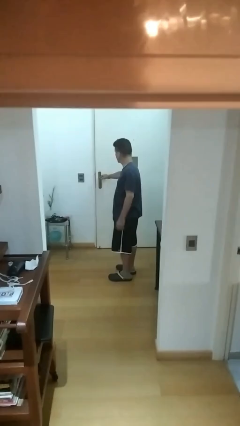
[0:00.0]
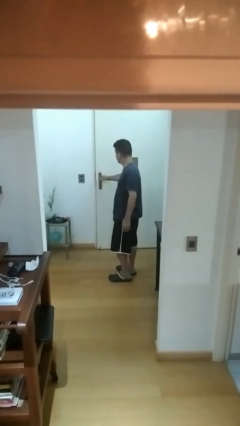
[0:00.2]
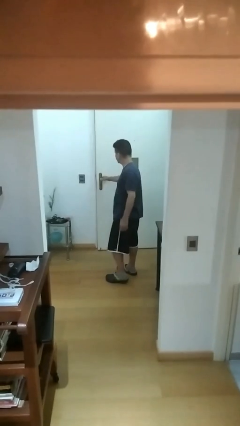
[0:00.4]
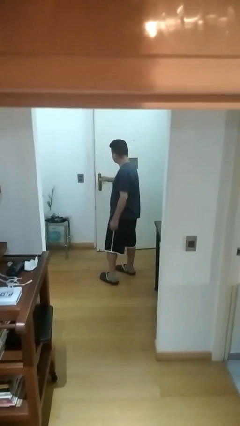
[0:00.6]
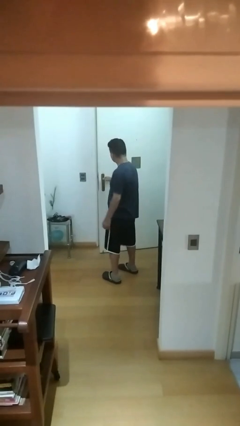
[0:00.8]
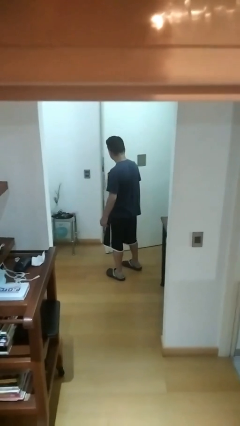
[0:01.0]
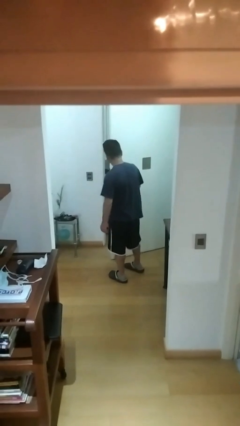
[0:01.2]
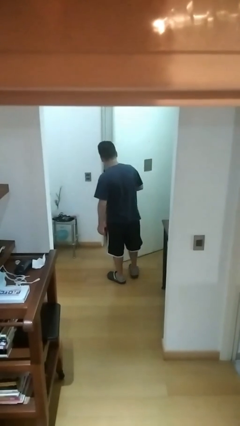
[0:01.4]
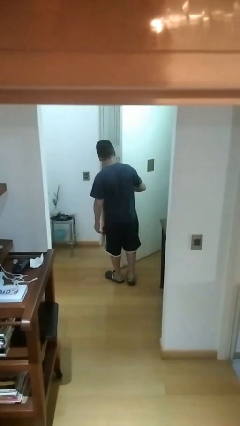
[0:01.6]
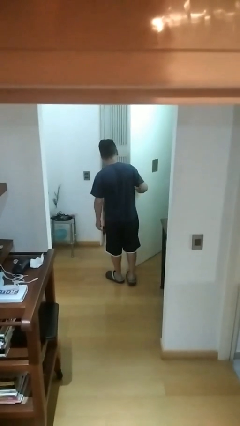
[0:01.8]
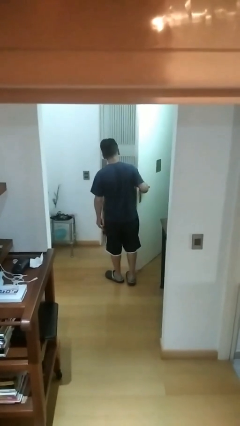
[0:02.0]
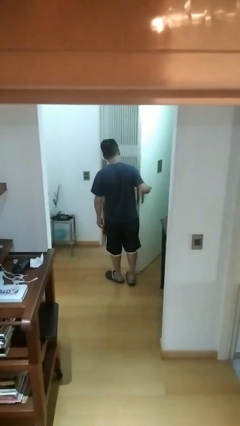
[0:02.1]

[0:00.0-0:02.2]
person opens facility door

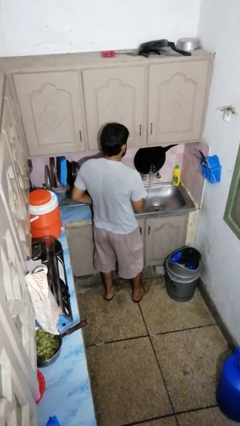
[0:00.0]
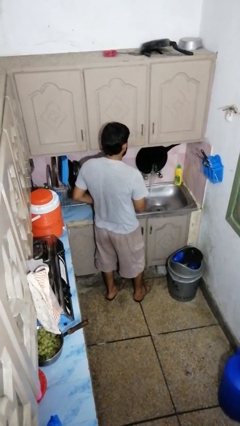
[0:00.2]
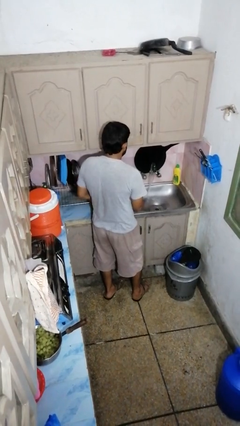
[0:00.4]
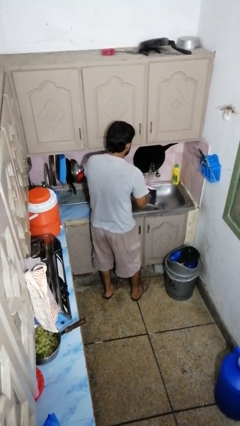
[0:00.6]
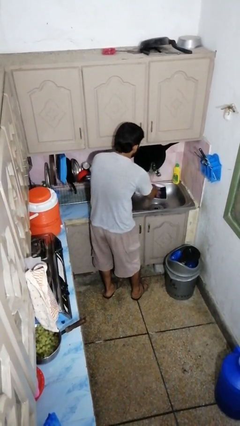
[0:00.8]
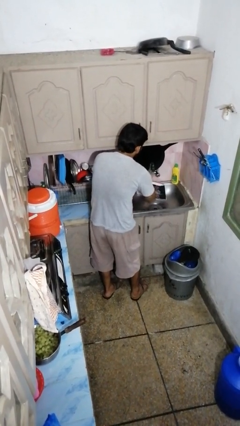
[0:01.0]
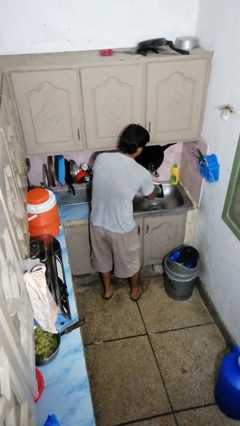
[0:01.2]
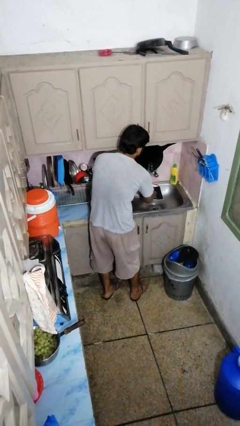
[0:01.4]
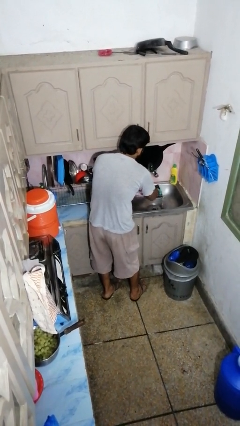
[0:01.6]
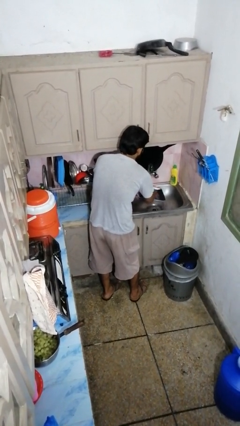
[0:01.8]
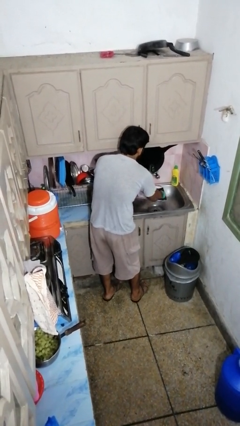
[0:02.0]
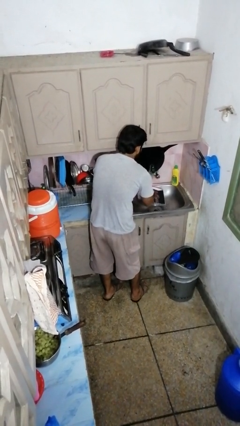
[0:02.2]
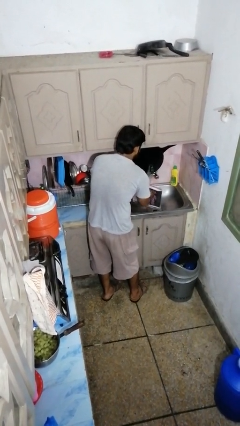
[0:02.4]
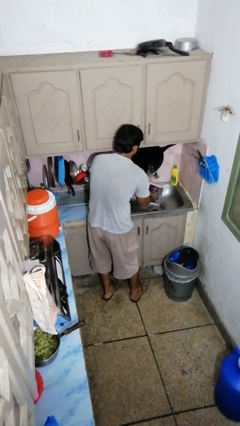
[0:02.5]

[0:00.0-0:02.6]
person washes dish

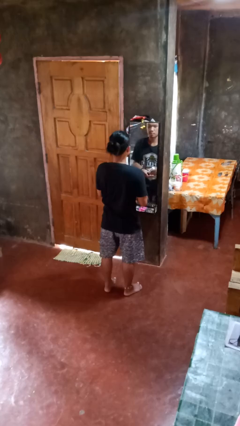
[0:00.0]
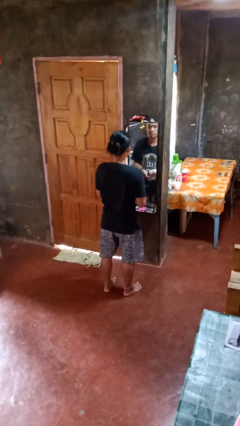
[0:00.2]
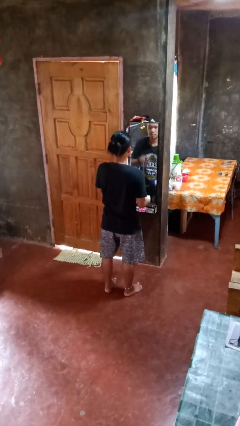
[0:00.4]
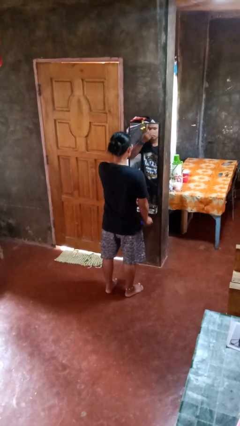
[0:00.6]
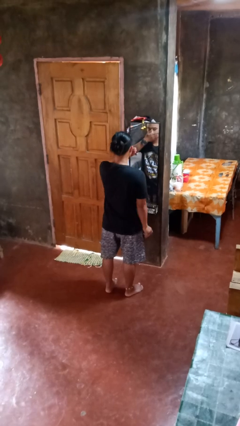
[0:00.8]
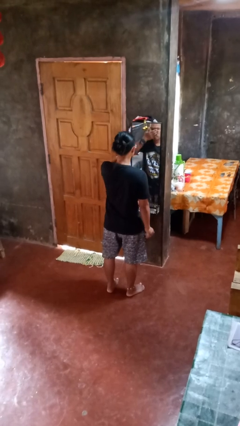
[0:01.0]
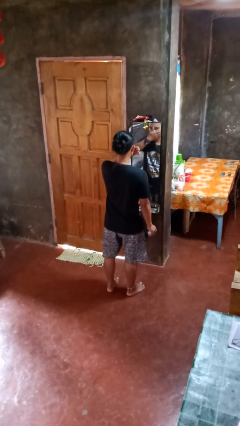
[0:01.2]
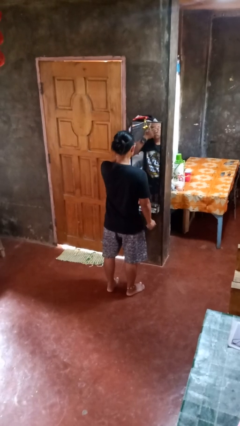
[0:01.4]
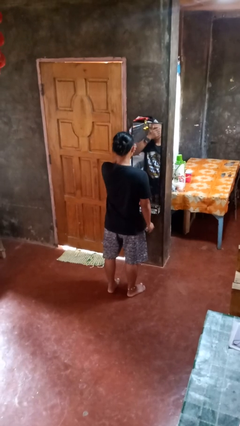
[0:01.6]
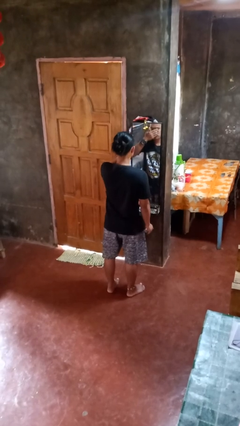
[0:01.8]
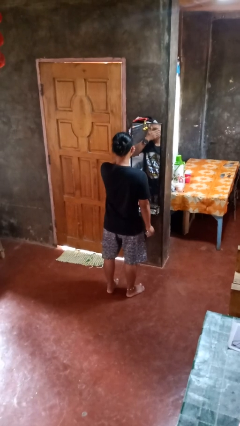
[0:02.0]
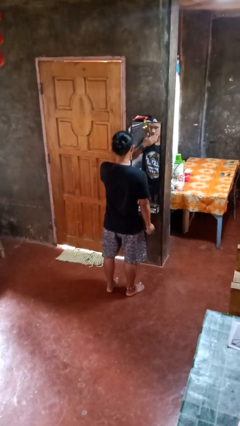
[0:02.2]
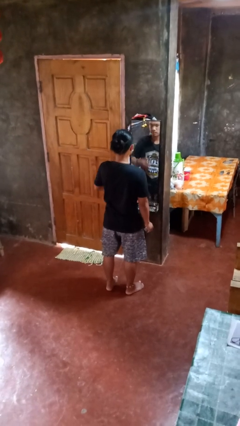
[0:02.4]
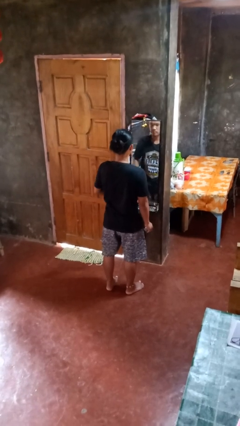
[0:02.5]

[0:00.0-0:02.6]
person applies eye makeup

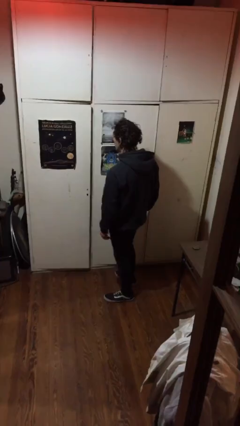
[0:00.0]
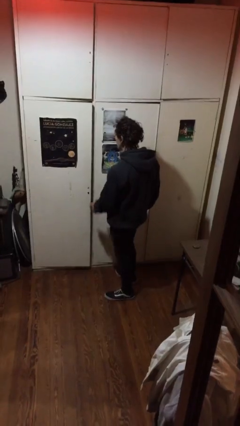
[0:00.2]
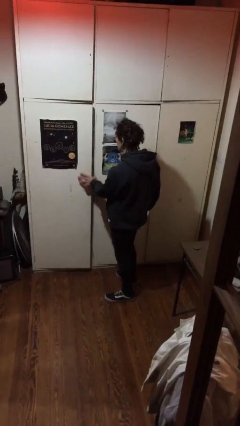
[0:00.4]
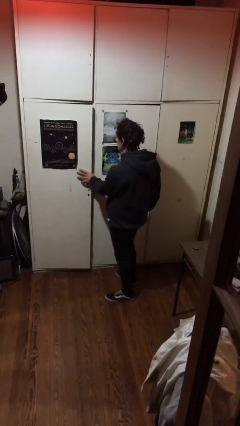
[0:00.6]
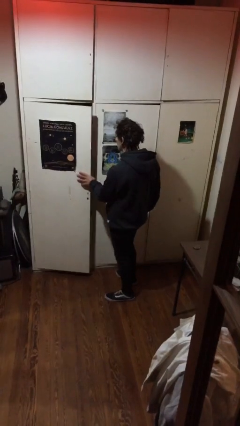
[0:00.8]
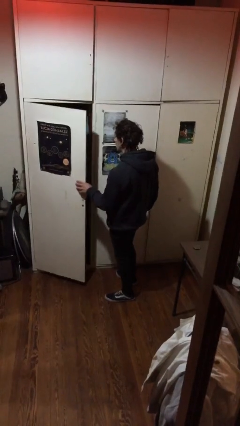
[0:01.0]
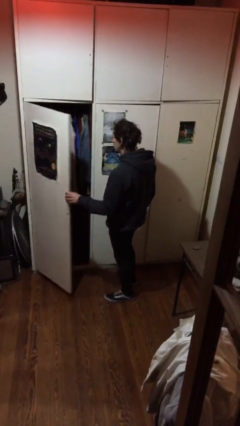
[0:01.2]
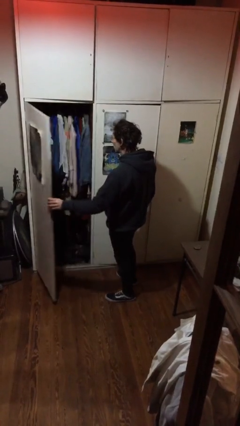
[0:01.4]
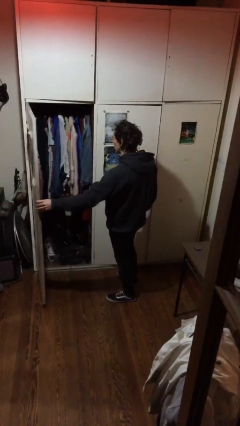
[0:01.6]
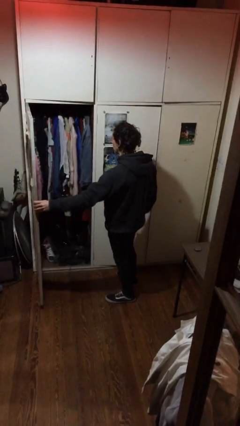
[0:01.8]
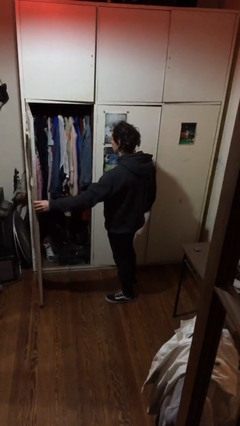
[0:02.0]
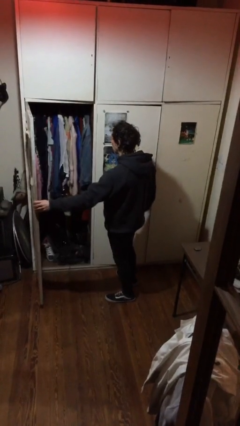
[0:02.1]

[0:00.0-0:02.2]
person opens closet door

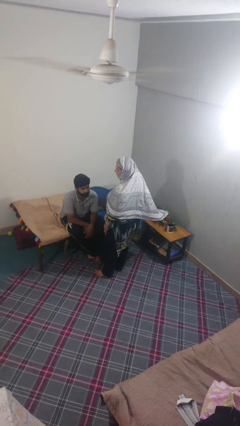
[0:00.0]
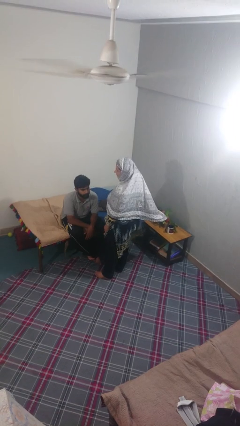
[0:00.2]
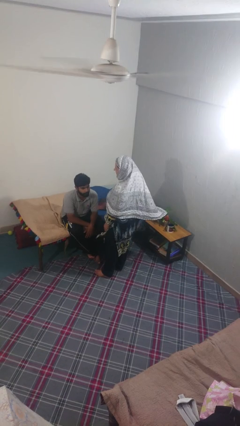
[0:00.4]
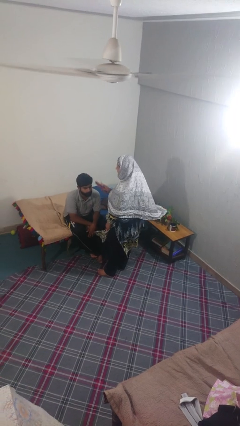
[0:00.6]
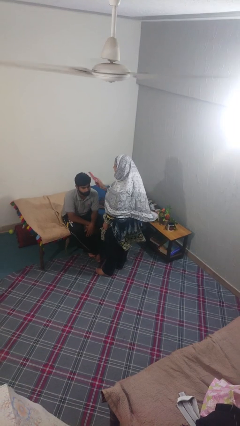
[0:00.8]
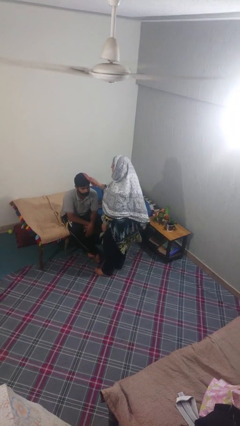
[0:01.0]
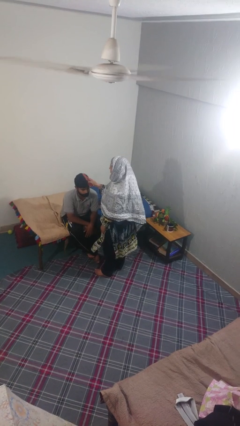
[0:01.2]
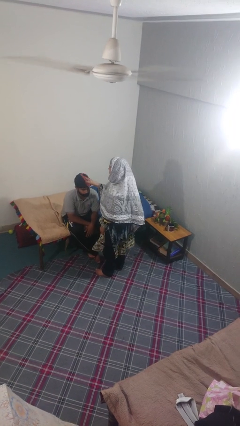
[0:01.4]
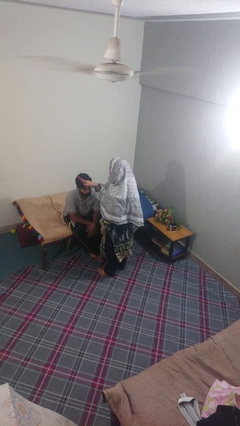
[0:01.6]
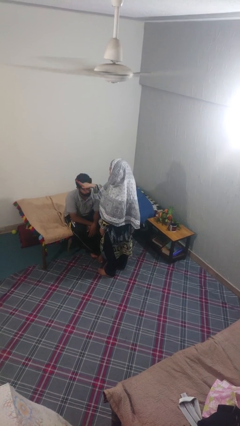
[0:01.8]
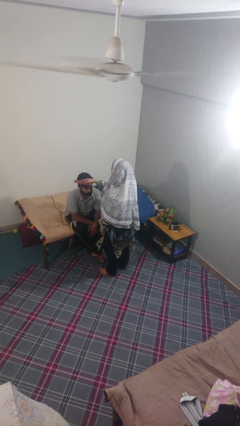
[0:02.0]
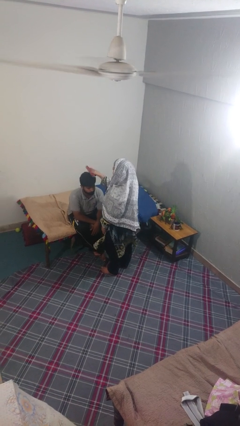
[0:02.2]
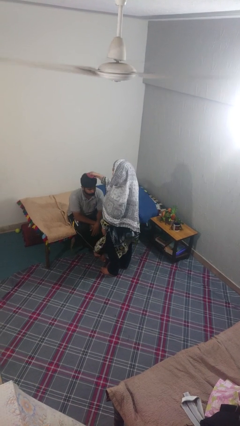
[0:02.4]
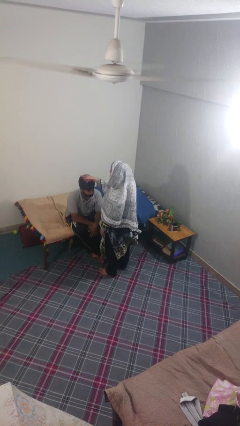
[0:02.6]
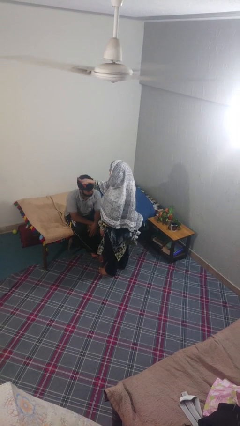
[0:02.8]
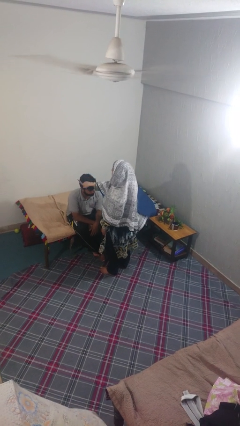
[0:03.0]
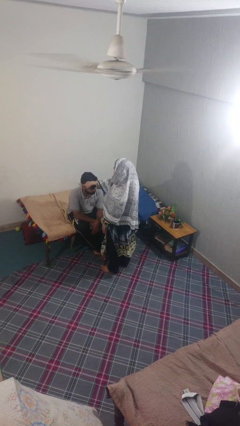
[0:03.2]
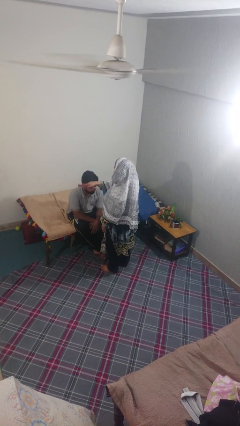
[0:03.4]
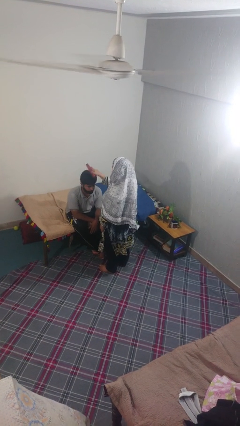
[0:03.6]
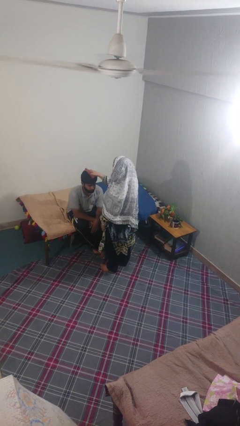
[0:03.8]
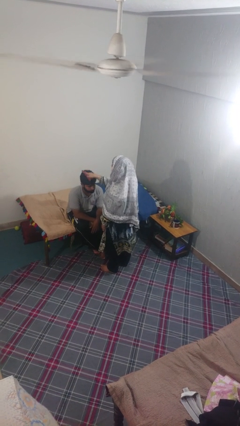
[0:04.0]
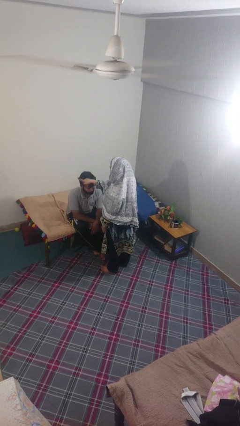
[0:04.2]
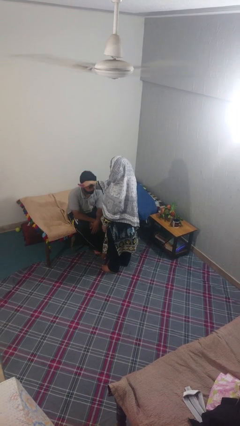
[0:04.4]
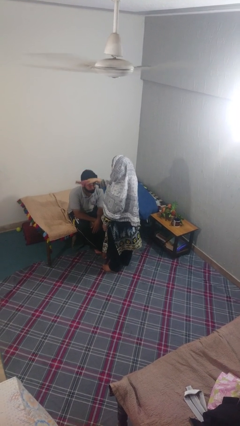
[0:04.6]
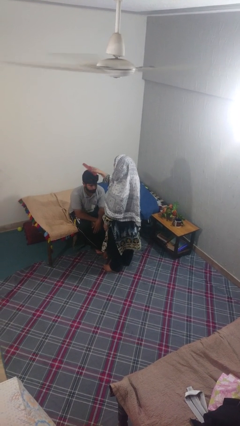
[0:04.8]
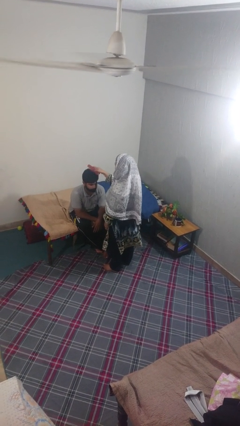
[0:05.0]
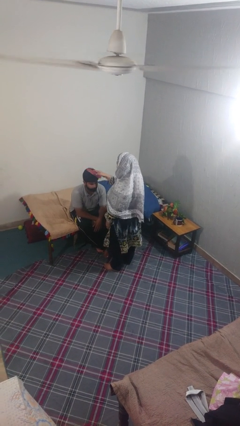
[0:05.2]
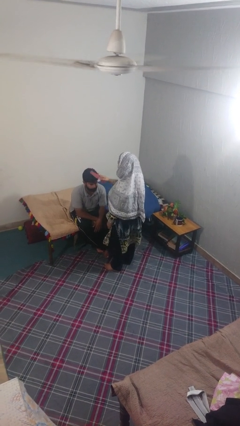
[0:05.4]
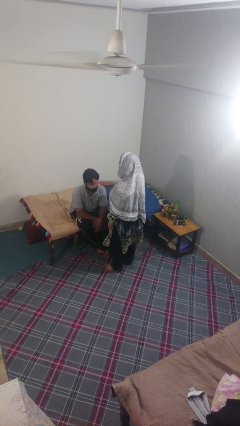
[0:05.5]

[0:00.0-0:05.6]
person brushes hair of person

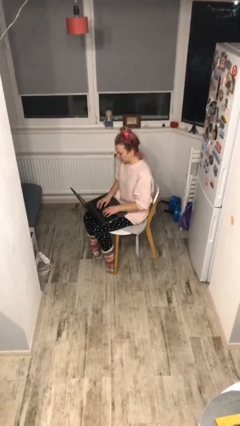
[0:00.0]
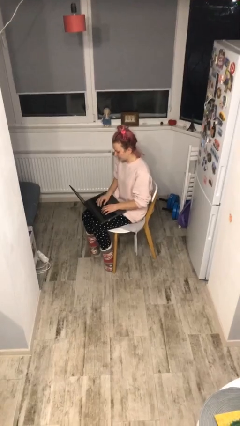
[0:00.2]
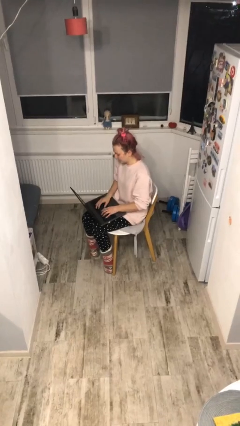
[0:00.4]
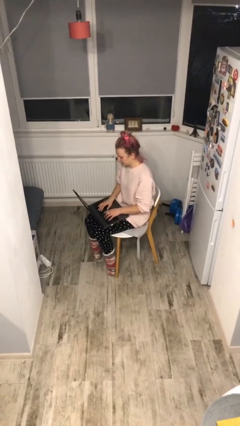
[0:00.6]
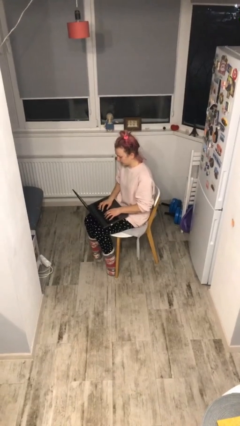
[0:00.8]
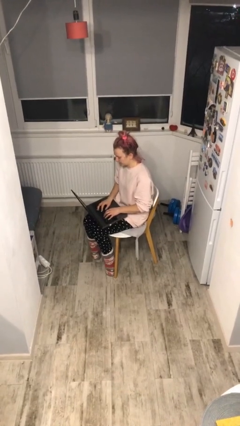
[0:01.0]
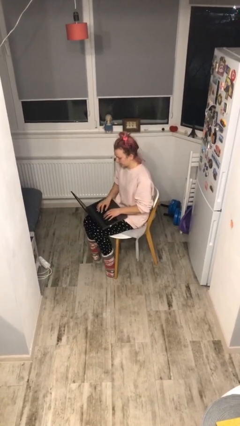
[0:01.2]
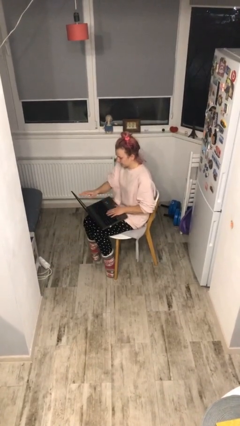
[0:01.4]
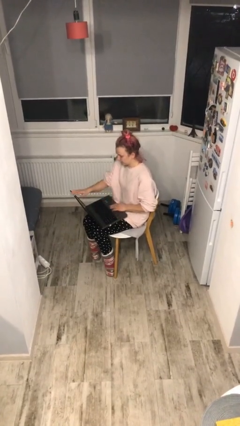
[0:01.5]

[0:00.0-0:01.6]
person interacts with laptop

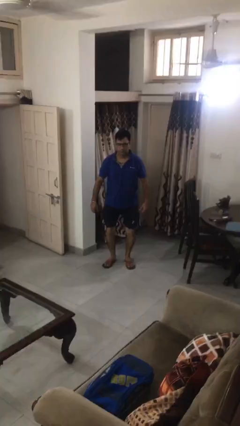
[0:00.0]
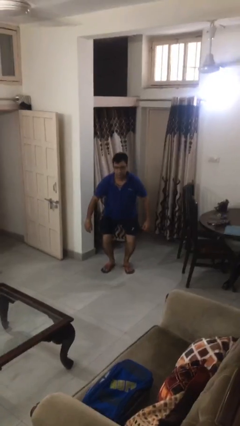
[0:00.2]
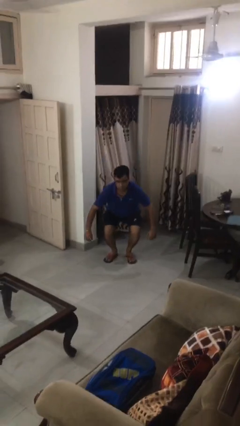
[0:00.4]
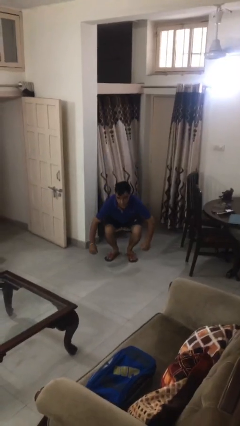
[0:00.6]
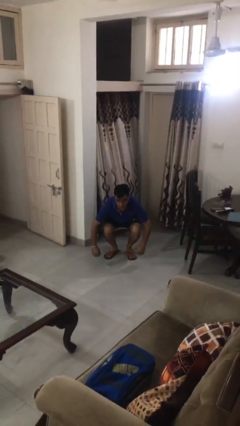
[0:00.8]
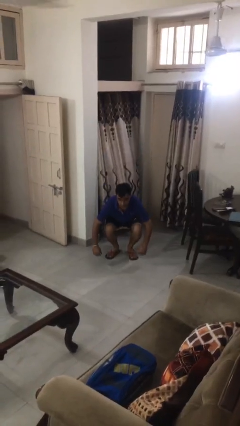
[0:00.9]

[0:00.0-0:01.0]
person squats
